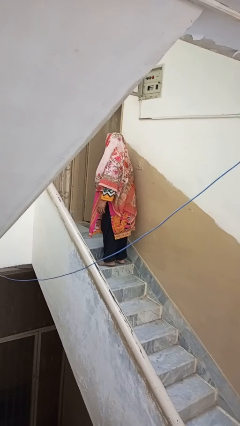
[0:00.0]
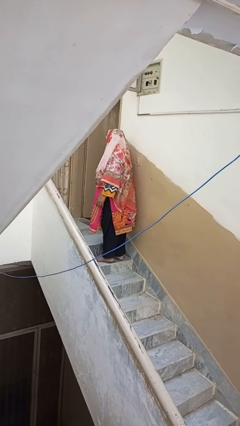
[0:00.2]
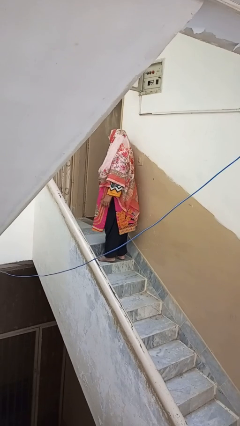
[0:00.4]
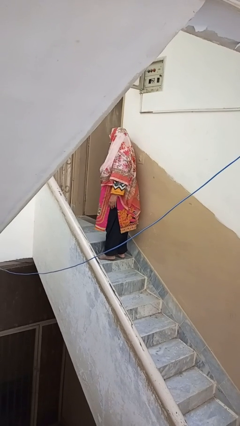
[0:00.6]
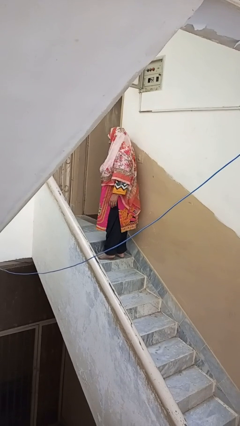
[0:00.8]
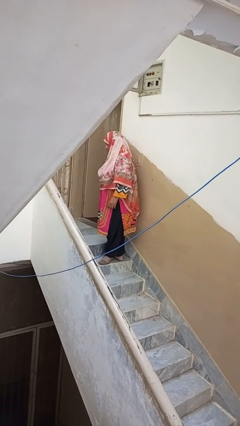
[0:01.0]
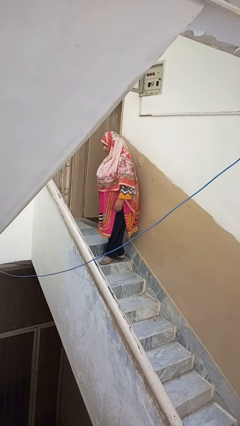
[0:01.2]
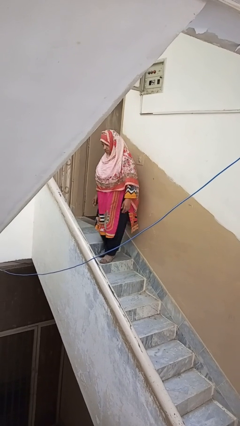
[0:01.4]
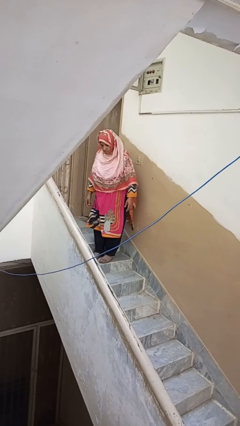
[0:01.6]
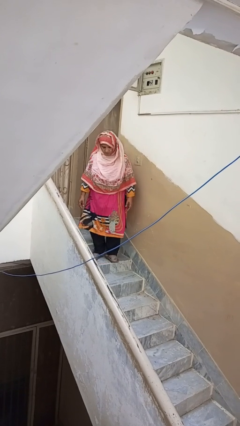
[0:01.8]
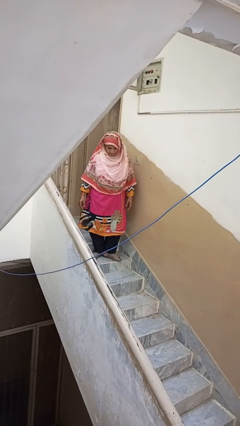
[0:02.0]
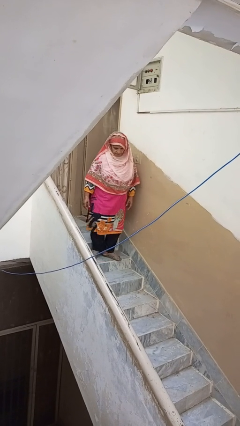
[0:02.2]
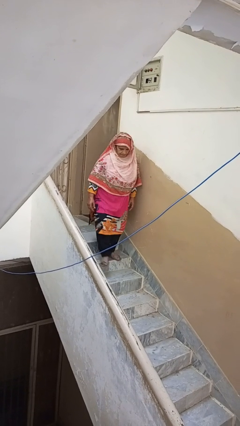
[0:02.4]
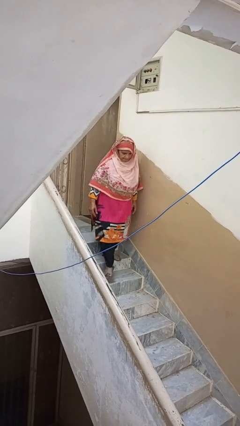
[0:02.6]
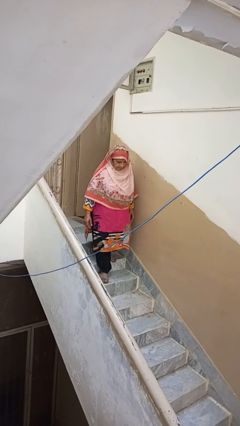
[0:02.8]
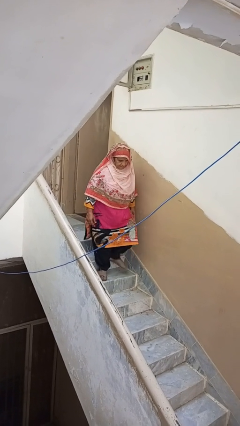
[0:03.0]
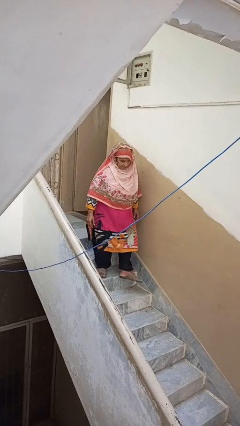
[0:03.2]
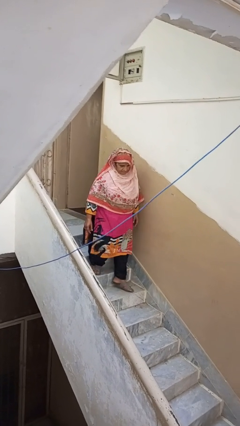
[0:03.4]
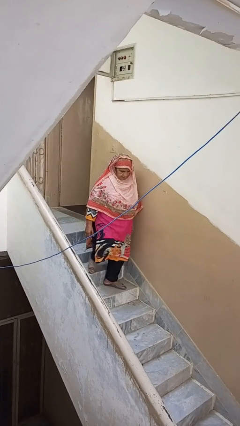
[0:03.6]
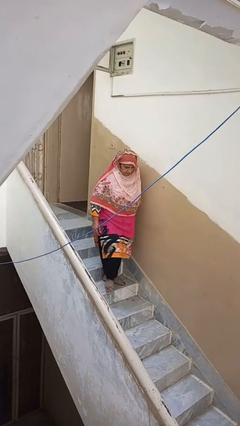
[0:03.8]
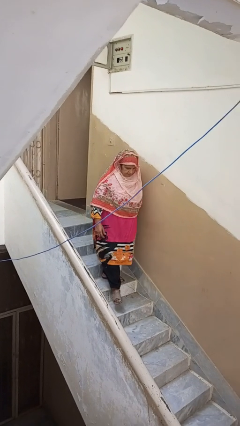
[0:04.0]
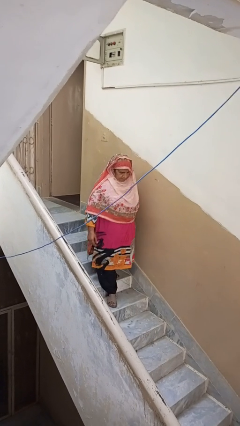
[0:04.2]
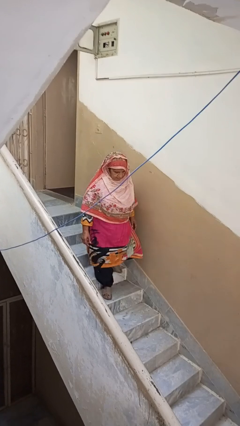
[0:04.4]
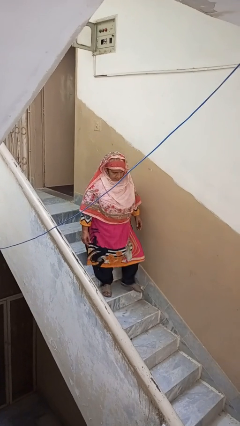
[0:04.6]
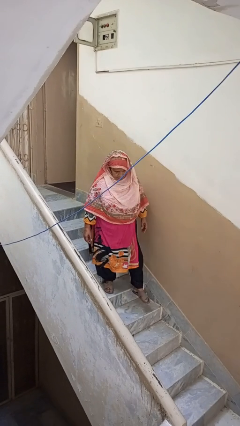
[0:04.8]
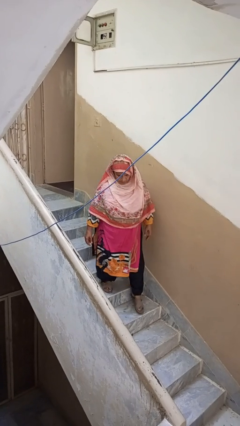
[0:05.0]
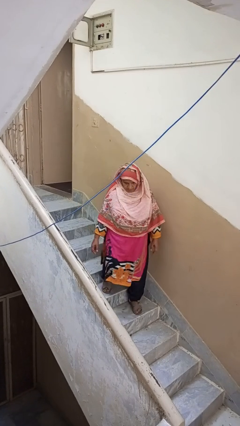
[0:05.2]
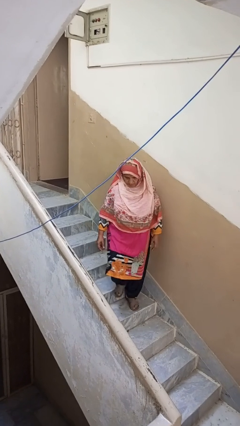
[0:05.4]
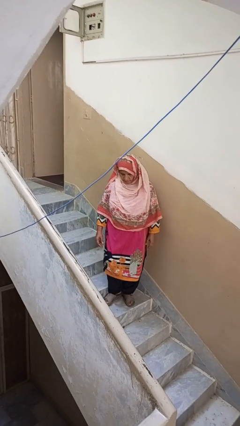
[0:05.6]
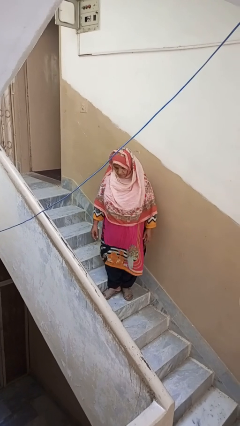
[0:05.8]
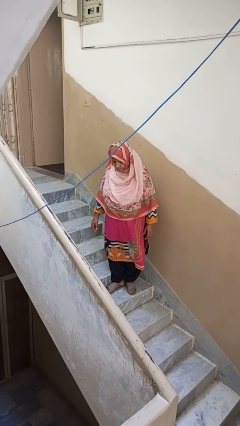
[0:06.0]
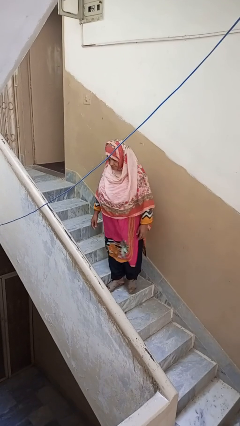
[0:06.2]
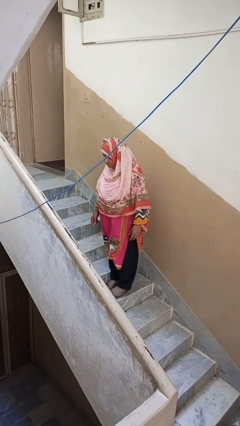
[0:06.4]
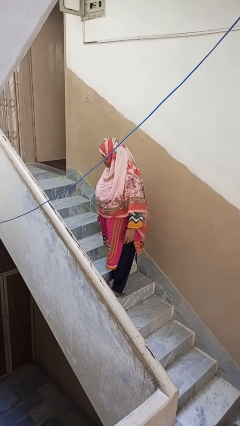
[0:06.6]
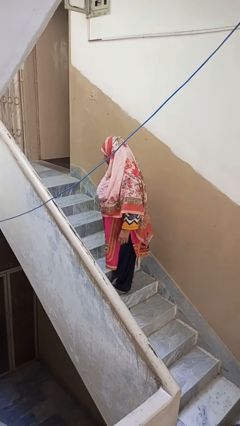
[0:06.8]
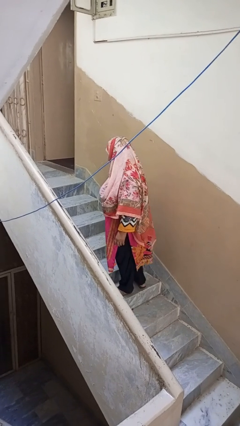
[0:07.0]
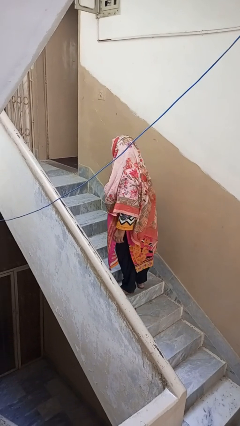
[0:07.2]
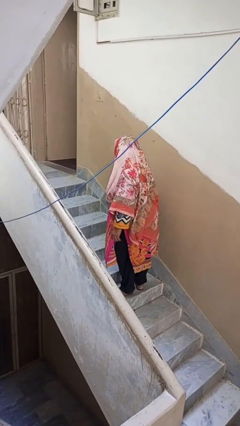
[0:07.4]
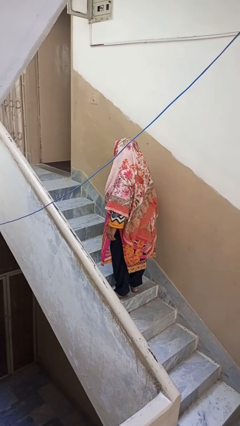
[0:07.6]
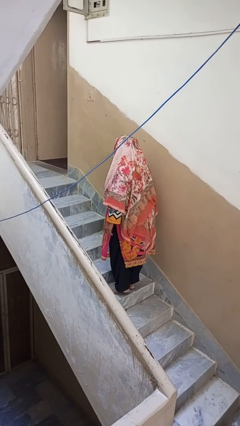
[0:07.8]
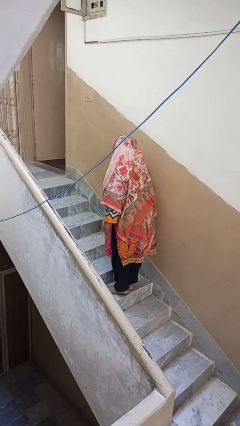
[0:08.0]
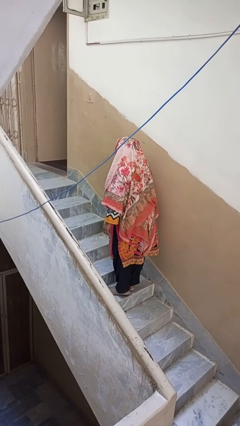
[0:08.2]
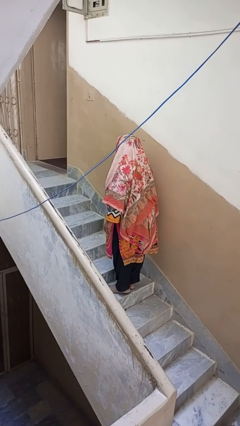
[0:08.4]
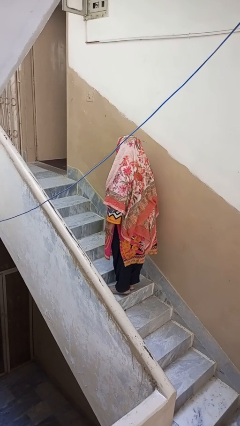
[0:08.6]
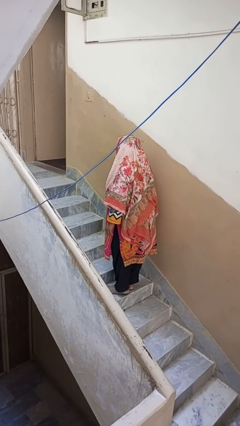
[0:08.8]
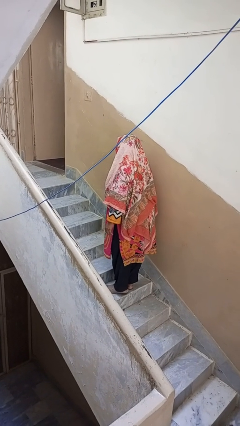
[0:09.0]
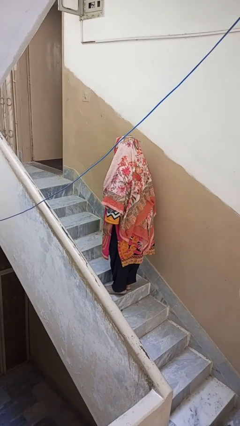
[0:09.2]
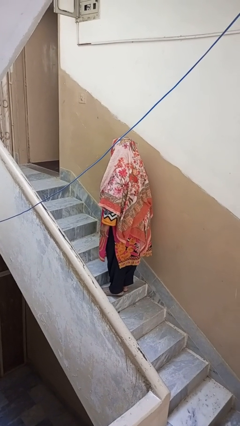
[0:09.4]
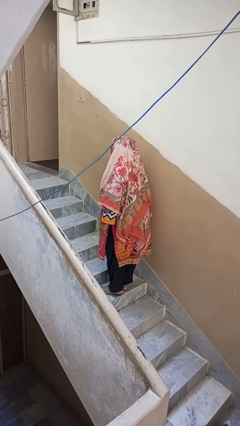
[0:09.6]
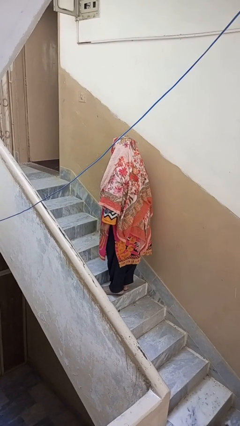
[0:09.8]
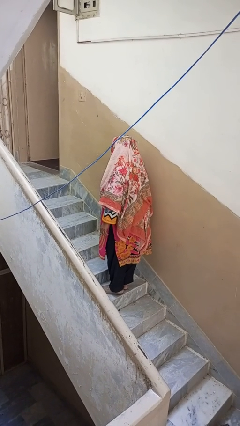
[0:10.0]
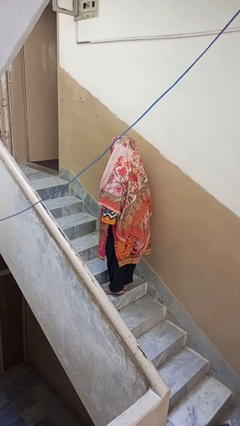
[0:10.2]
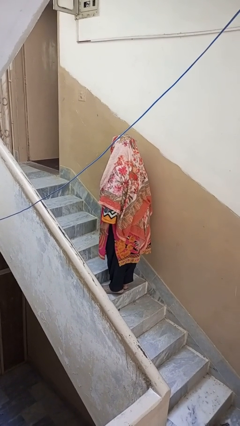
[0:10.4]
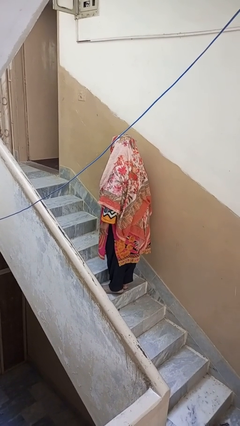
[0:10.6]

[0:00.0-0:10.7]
person climbs down stairs

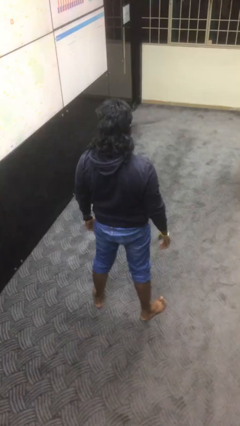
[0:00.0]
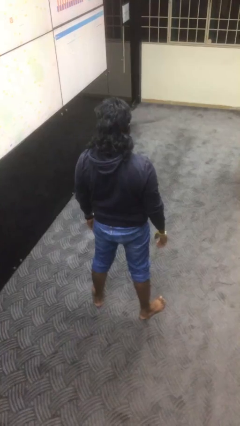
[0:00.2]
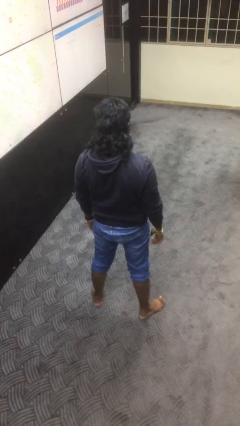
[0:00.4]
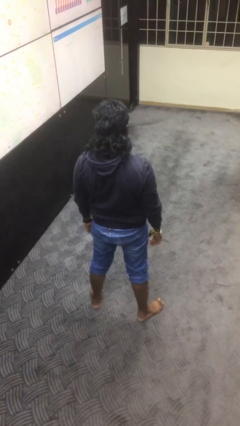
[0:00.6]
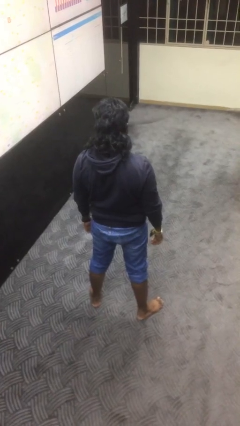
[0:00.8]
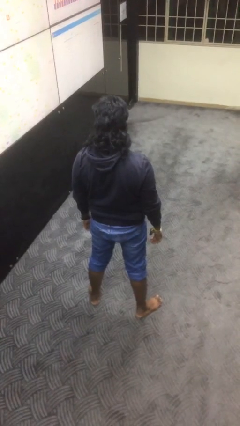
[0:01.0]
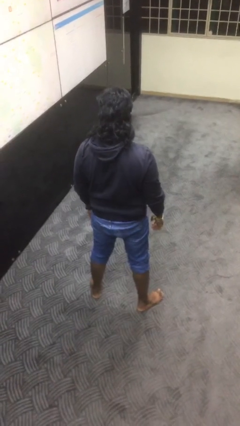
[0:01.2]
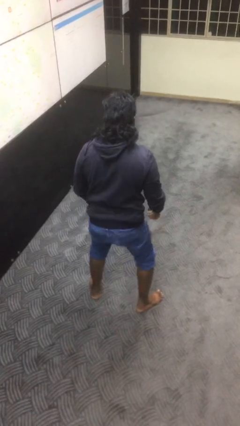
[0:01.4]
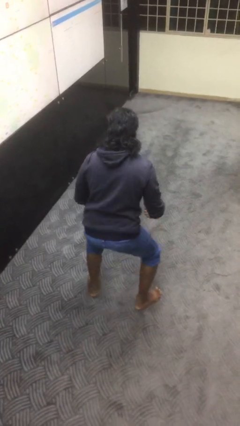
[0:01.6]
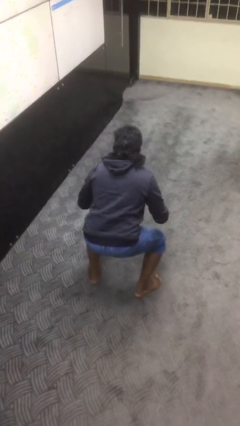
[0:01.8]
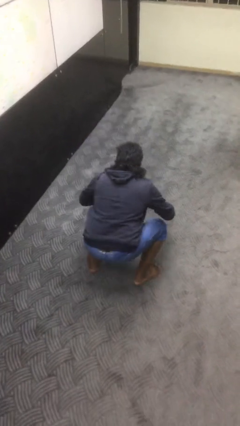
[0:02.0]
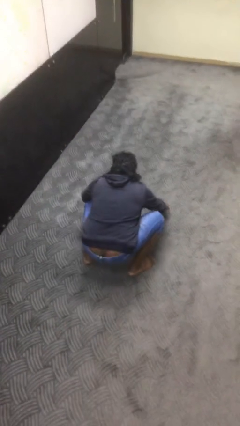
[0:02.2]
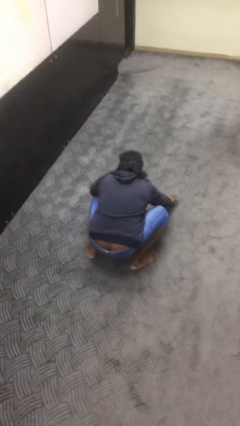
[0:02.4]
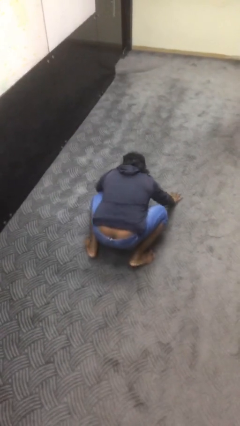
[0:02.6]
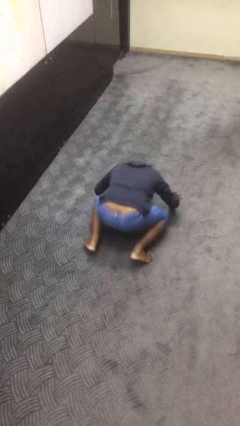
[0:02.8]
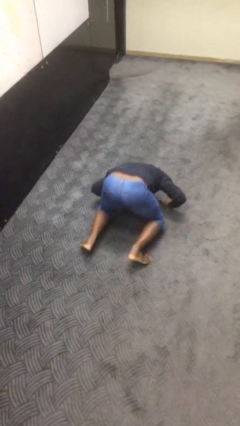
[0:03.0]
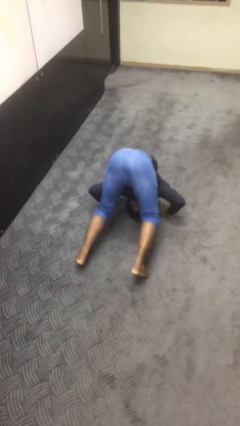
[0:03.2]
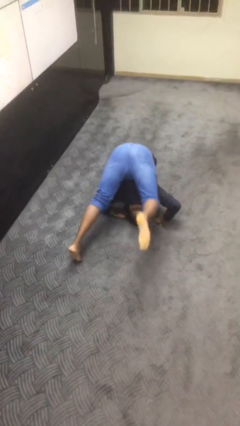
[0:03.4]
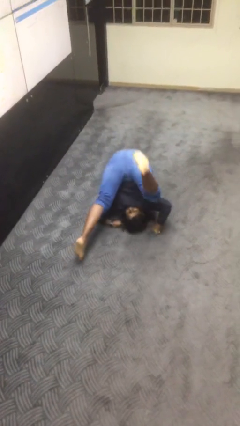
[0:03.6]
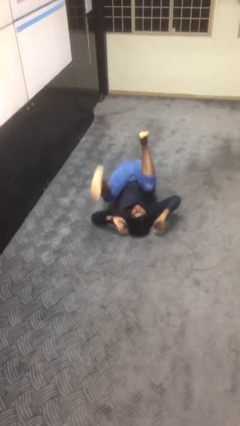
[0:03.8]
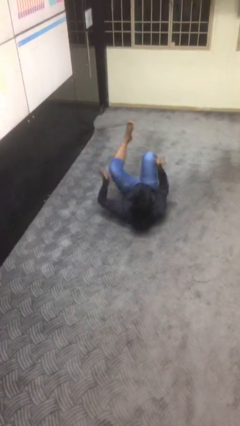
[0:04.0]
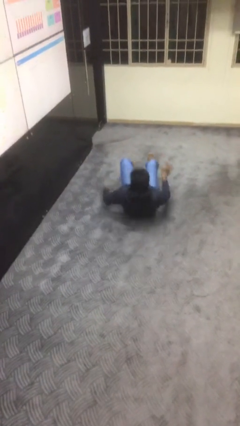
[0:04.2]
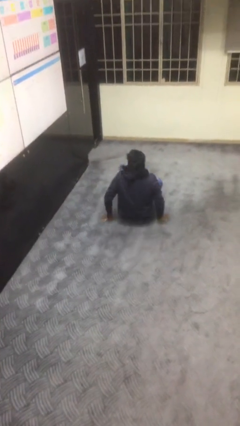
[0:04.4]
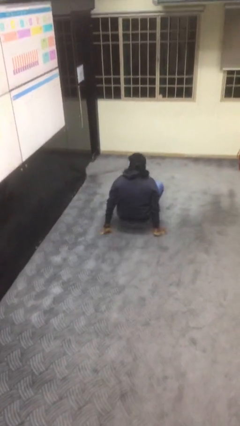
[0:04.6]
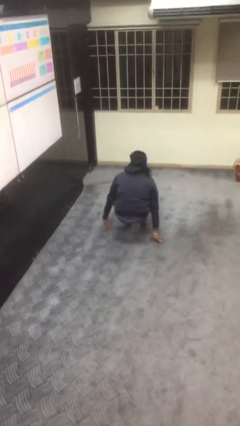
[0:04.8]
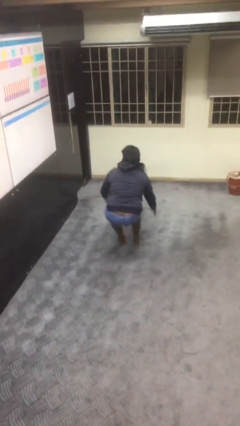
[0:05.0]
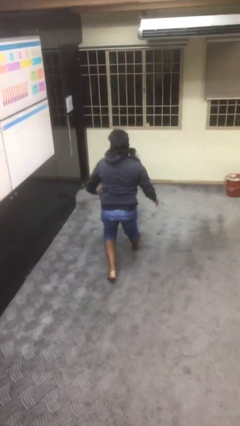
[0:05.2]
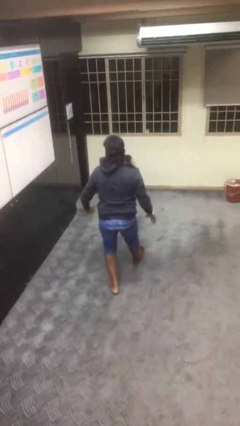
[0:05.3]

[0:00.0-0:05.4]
person somersaults

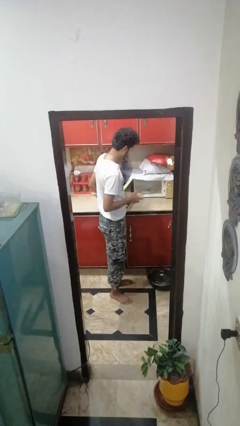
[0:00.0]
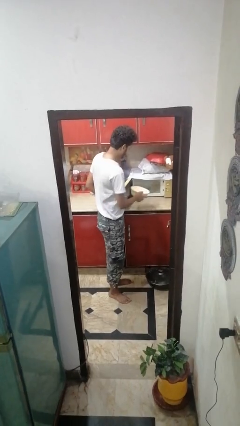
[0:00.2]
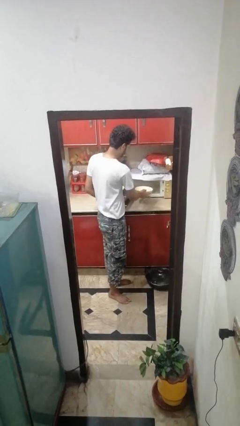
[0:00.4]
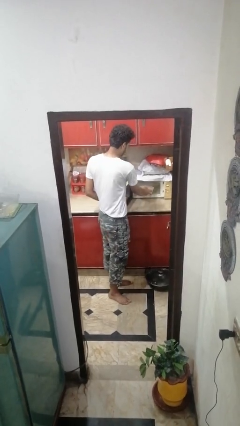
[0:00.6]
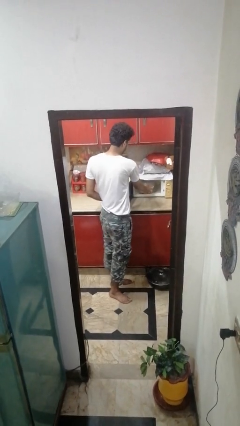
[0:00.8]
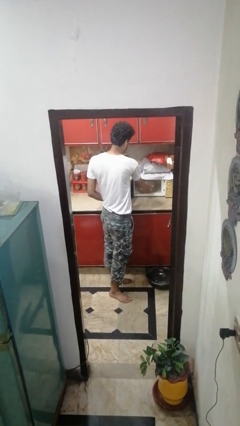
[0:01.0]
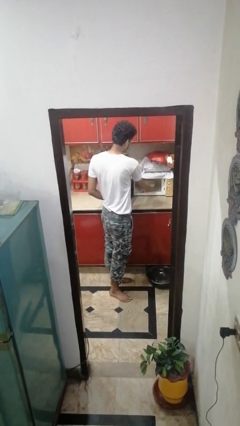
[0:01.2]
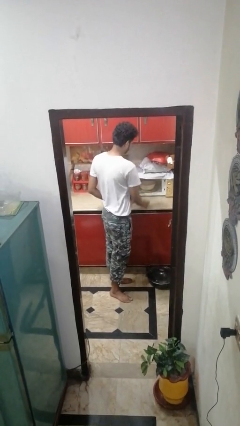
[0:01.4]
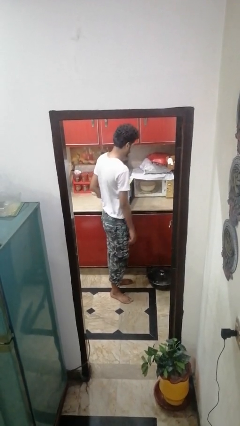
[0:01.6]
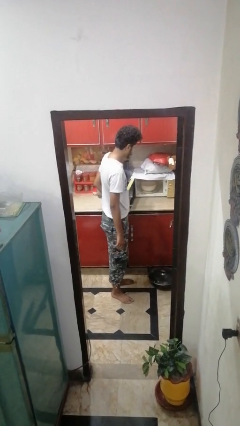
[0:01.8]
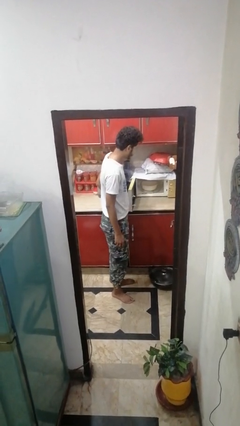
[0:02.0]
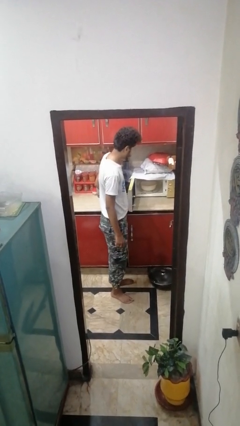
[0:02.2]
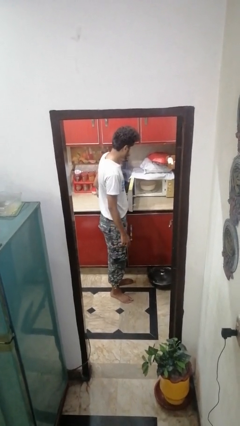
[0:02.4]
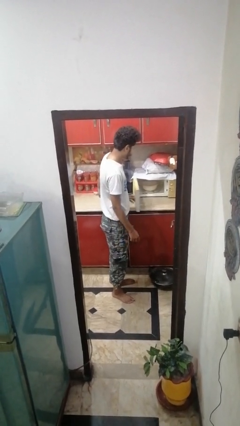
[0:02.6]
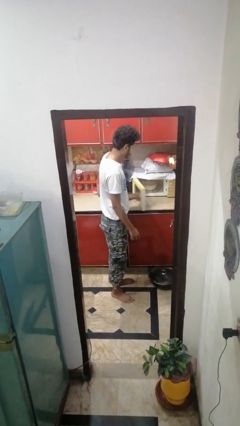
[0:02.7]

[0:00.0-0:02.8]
person puts object into microwave
